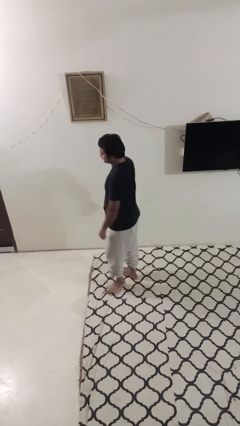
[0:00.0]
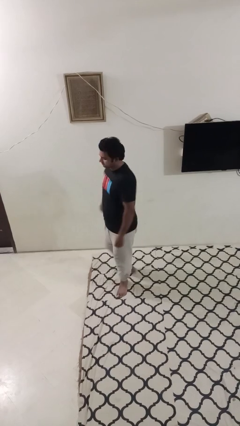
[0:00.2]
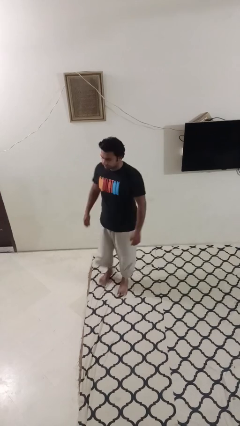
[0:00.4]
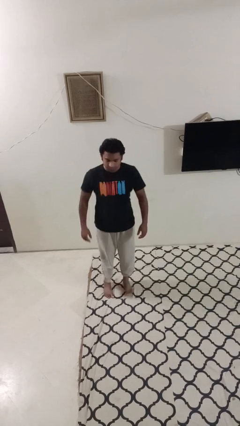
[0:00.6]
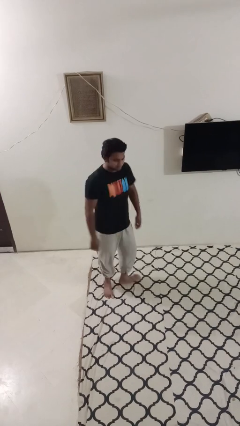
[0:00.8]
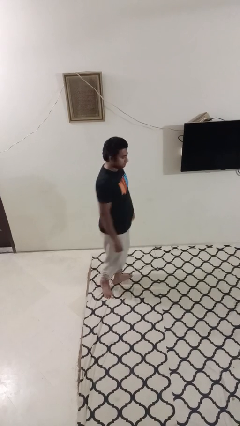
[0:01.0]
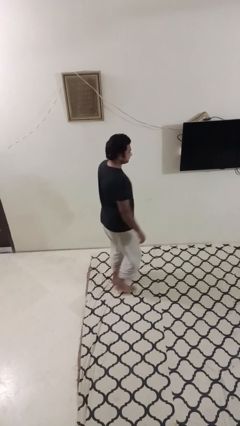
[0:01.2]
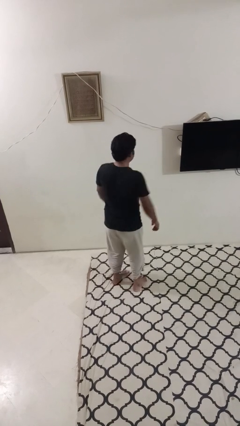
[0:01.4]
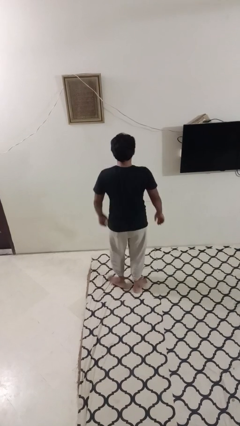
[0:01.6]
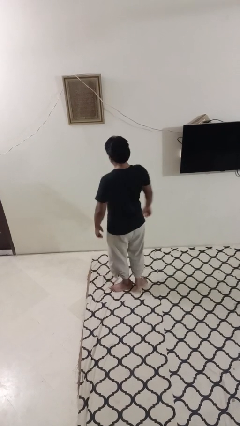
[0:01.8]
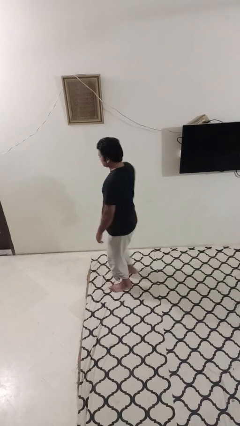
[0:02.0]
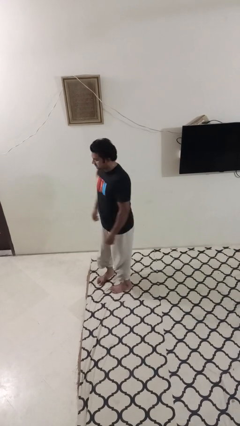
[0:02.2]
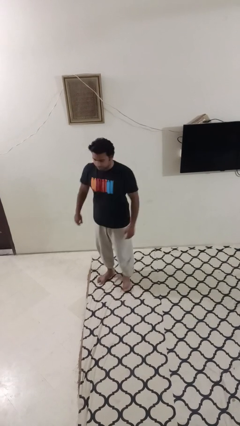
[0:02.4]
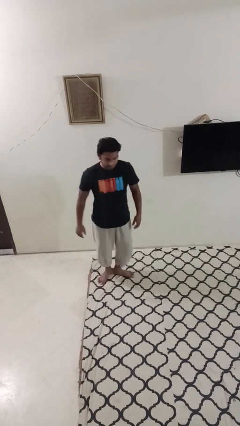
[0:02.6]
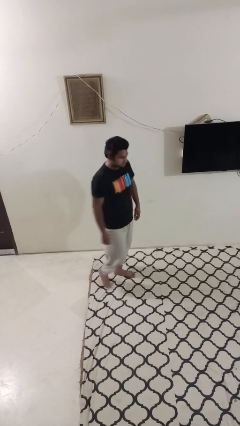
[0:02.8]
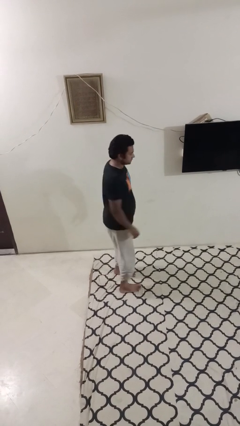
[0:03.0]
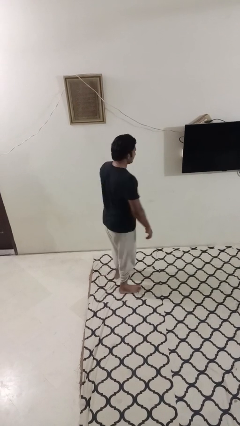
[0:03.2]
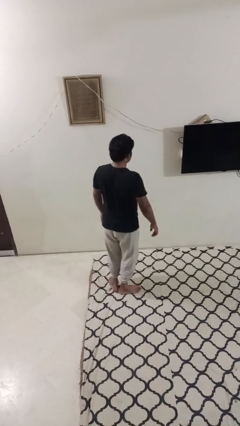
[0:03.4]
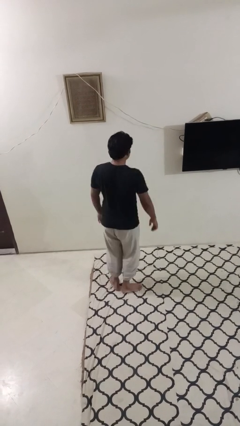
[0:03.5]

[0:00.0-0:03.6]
person twirls

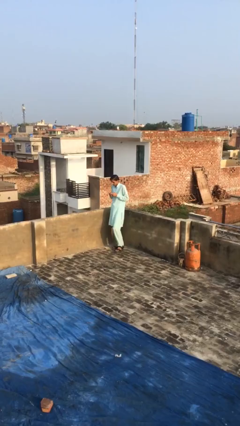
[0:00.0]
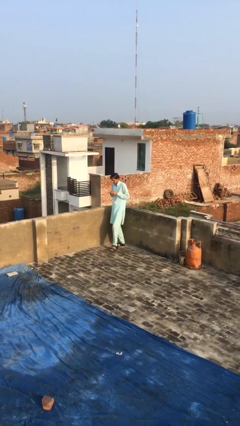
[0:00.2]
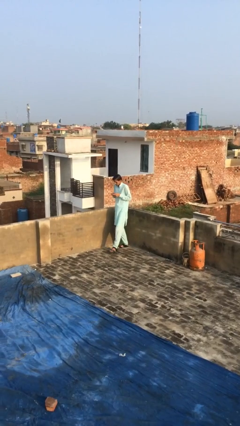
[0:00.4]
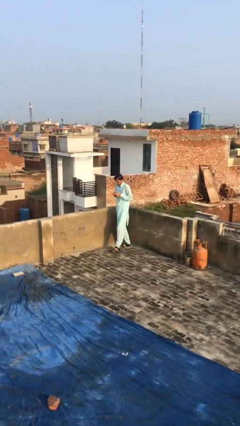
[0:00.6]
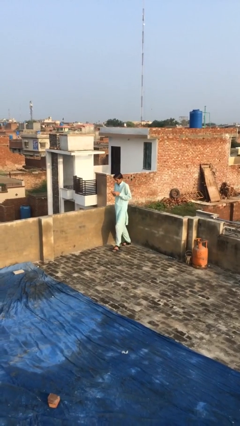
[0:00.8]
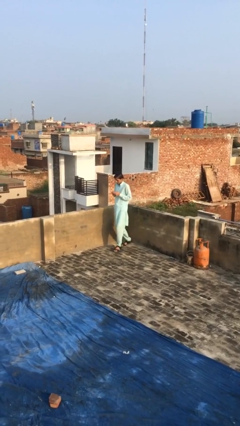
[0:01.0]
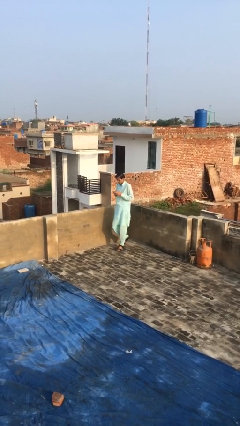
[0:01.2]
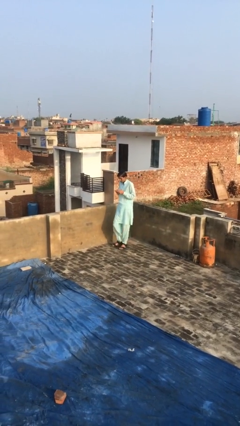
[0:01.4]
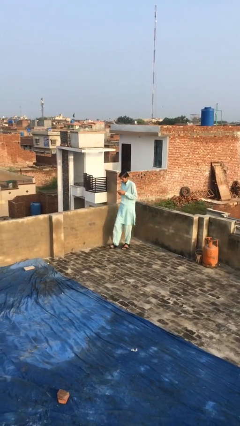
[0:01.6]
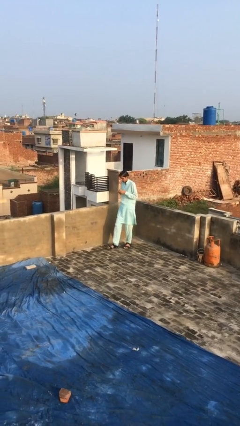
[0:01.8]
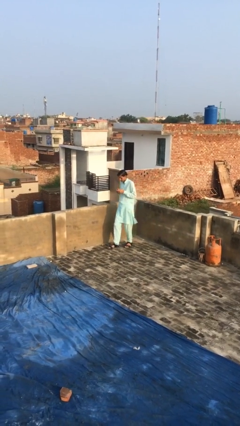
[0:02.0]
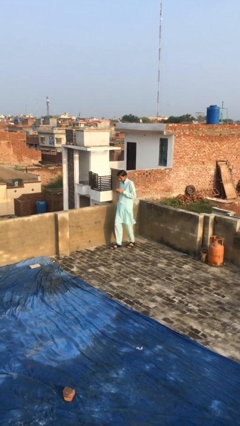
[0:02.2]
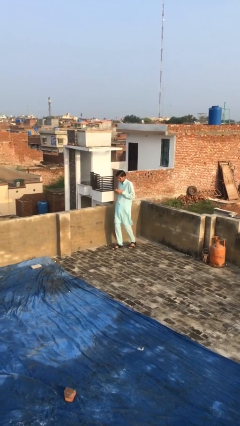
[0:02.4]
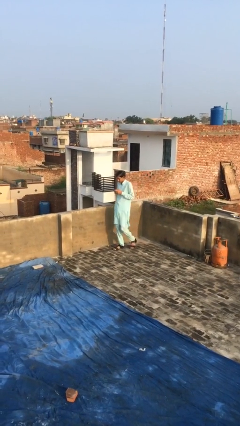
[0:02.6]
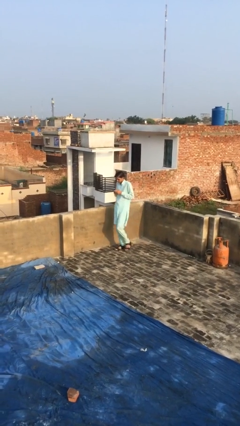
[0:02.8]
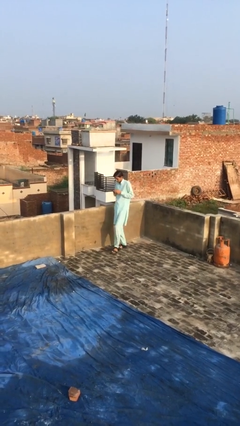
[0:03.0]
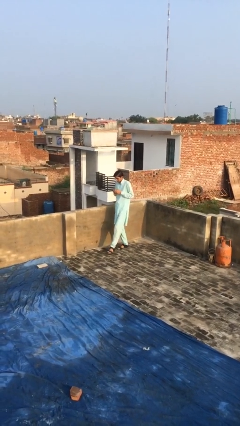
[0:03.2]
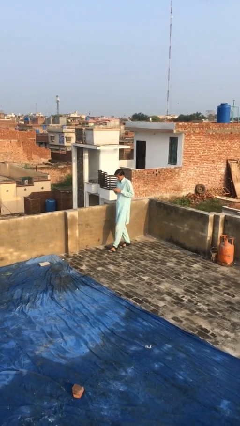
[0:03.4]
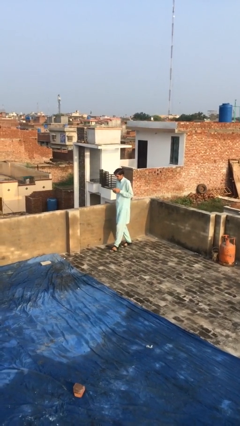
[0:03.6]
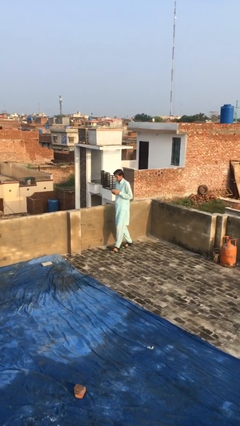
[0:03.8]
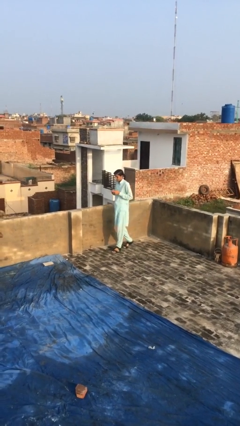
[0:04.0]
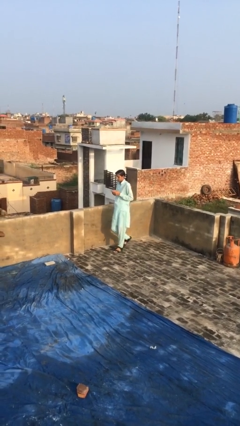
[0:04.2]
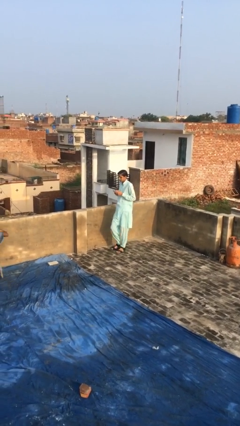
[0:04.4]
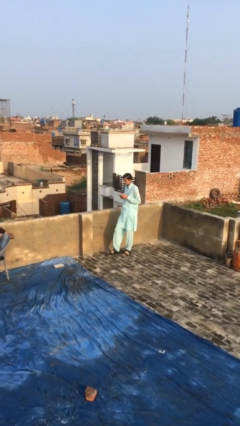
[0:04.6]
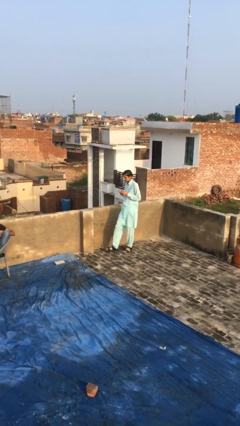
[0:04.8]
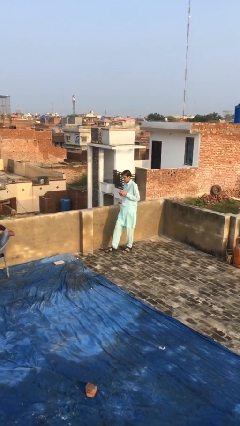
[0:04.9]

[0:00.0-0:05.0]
person texts on phone

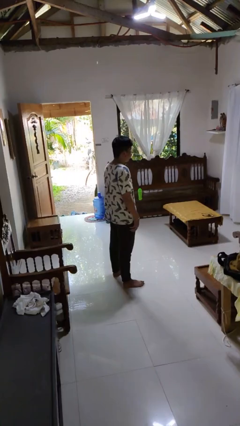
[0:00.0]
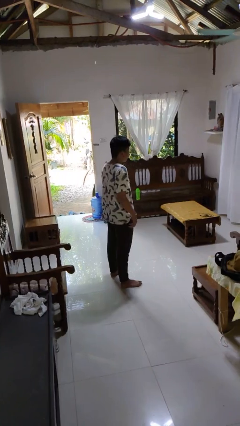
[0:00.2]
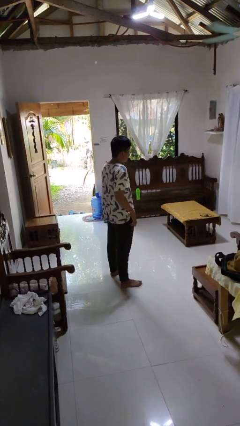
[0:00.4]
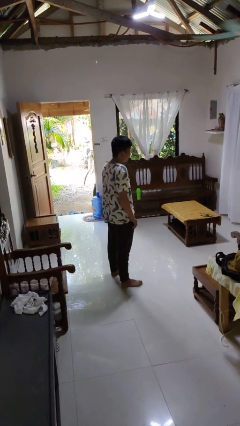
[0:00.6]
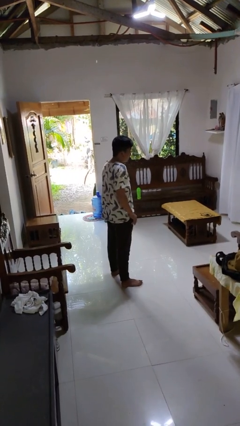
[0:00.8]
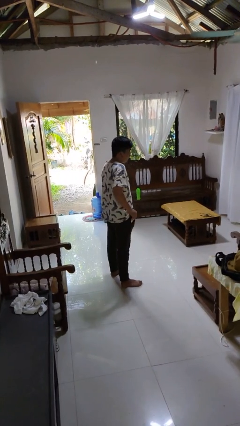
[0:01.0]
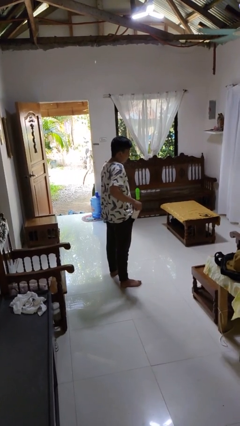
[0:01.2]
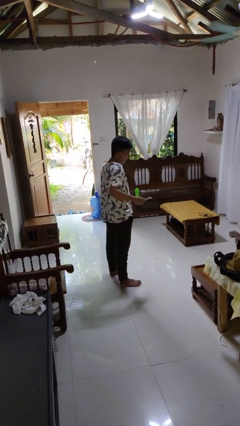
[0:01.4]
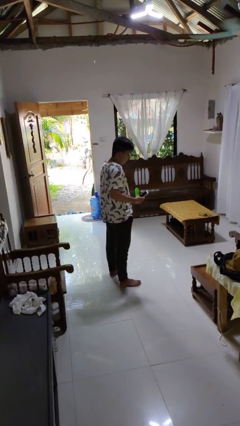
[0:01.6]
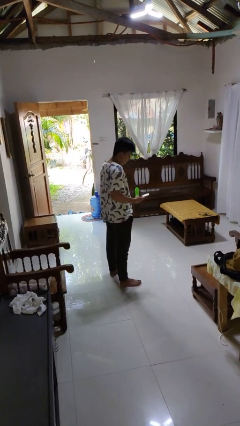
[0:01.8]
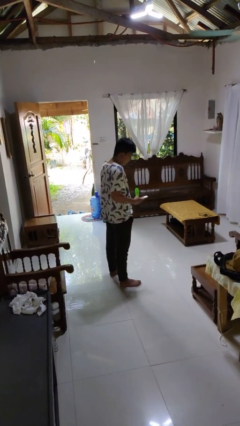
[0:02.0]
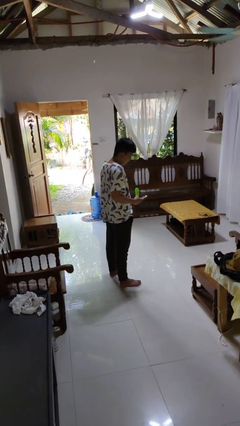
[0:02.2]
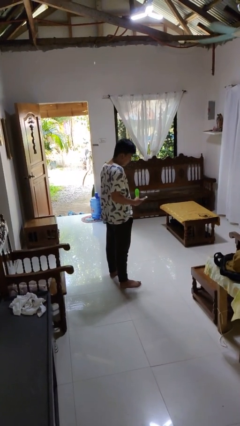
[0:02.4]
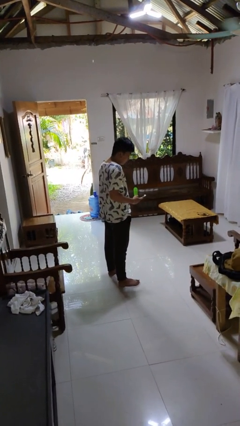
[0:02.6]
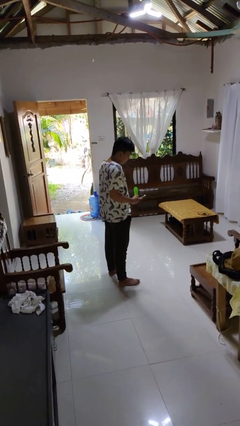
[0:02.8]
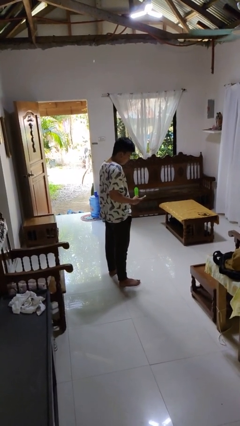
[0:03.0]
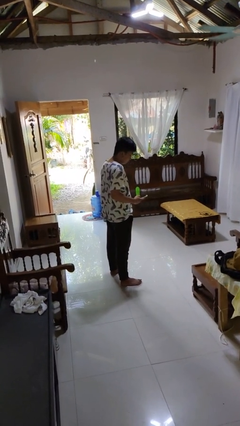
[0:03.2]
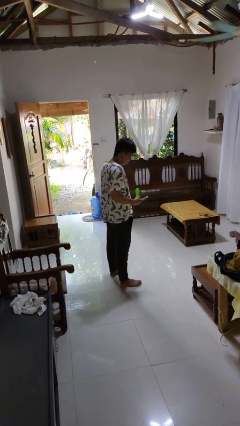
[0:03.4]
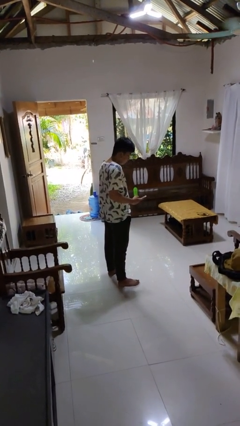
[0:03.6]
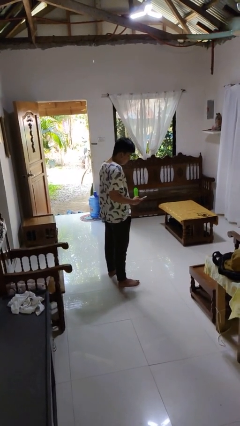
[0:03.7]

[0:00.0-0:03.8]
person takes phone from pocket

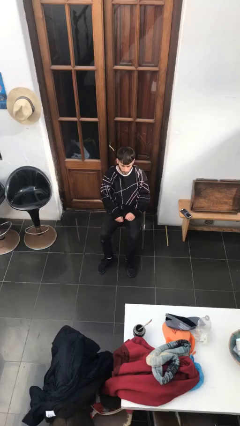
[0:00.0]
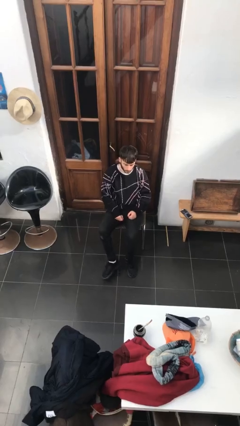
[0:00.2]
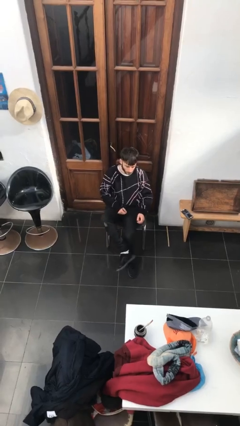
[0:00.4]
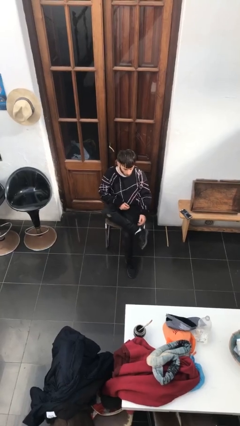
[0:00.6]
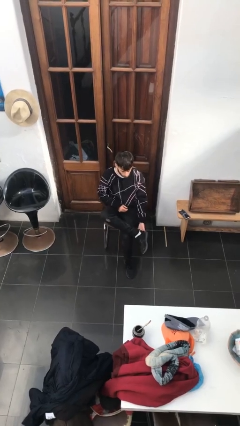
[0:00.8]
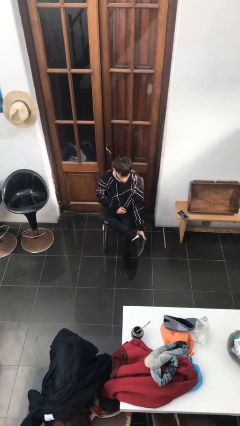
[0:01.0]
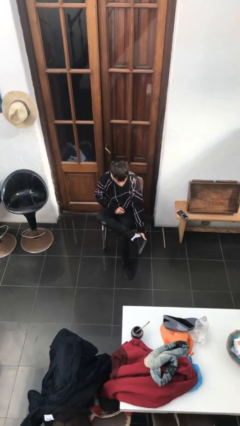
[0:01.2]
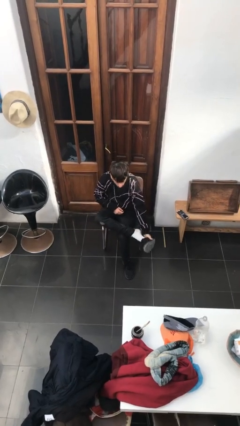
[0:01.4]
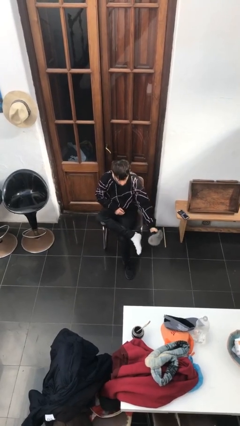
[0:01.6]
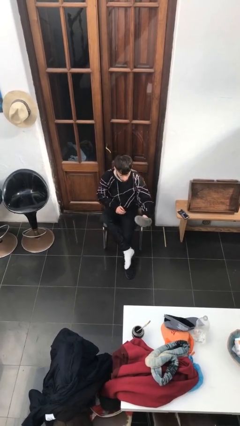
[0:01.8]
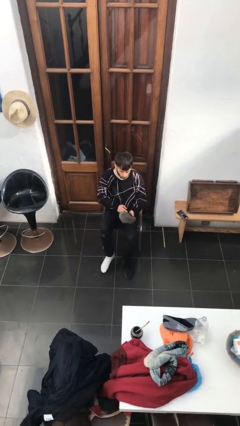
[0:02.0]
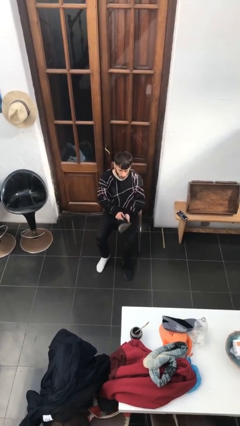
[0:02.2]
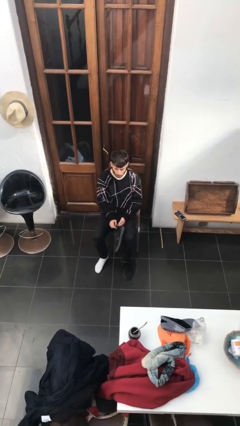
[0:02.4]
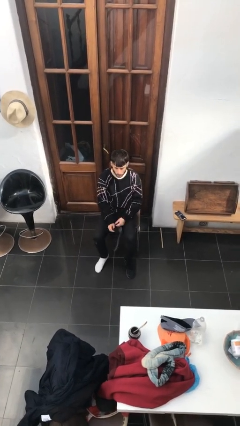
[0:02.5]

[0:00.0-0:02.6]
person takes off shoes

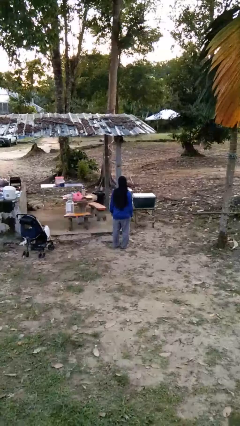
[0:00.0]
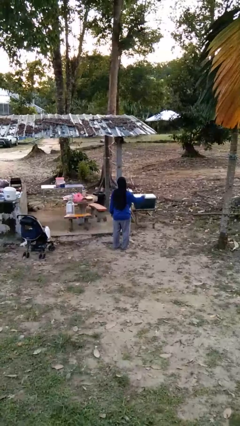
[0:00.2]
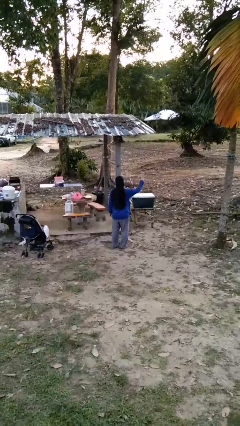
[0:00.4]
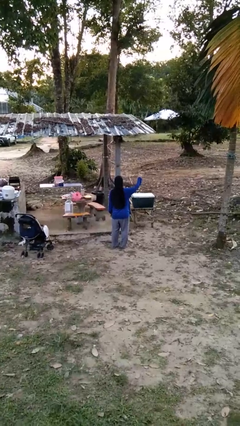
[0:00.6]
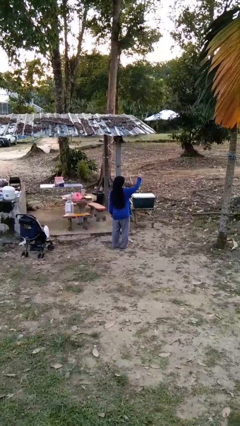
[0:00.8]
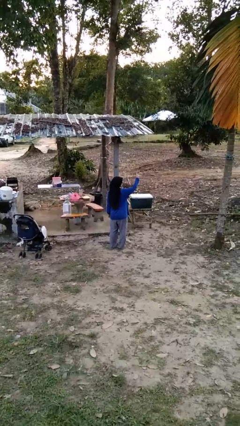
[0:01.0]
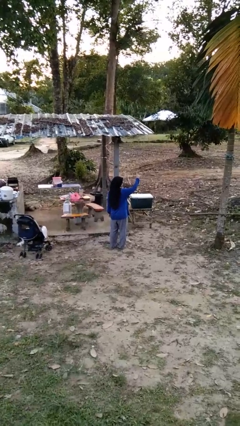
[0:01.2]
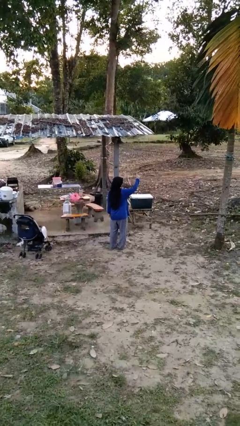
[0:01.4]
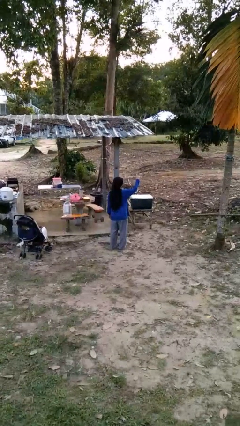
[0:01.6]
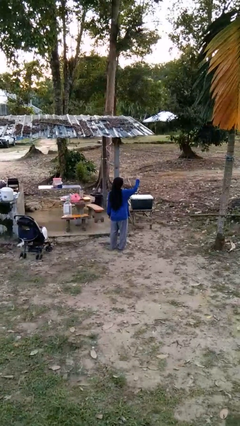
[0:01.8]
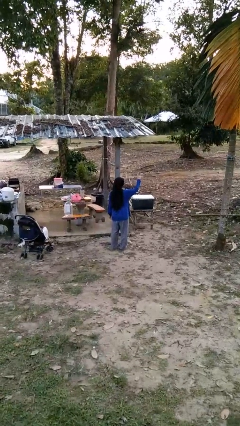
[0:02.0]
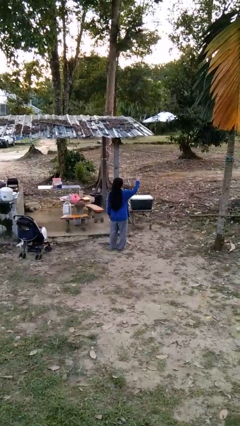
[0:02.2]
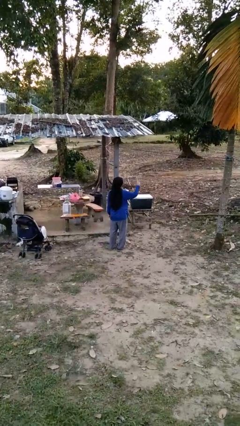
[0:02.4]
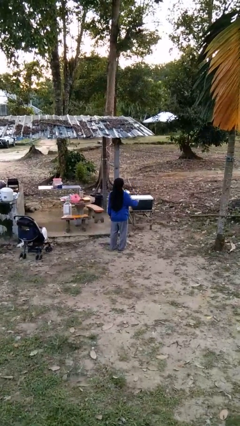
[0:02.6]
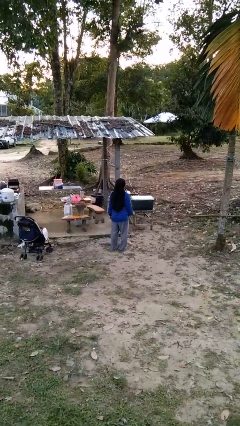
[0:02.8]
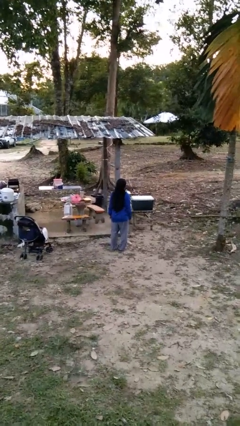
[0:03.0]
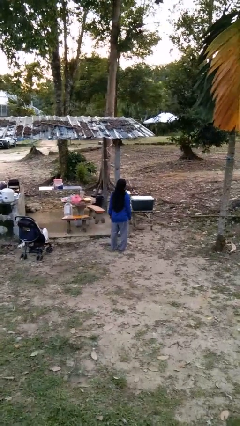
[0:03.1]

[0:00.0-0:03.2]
person gestures number three
